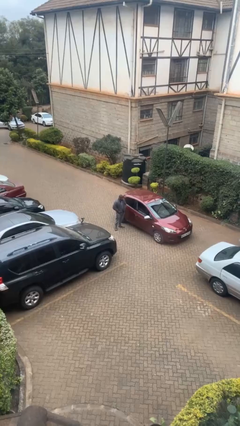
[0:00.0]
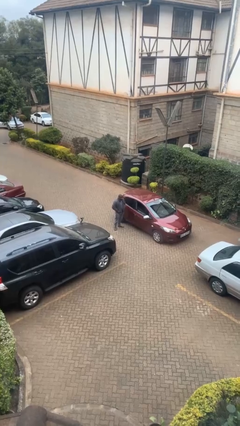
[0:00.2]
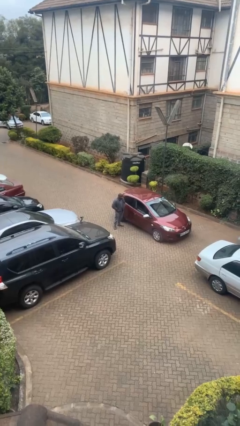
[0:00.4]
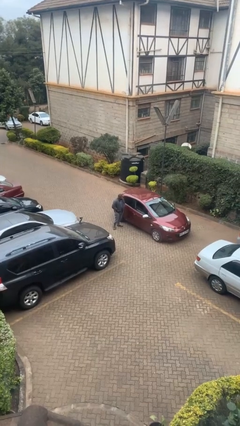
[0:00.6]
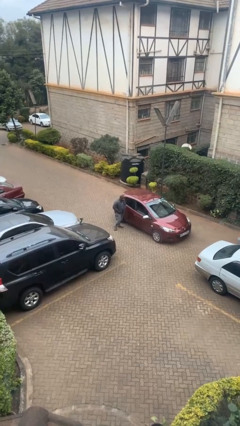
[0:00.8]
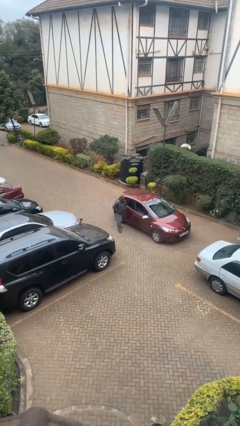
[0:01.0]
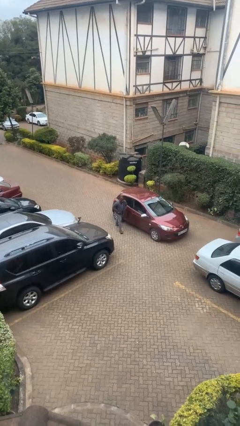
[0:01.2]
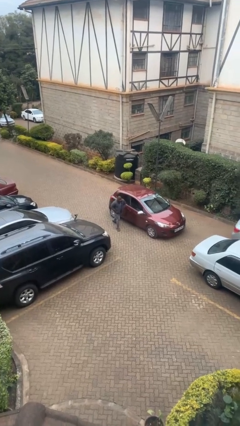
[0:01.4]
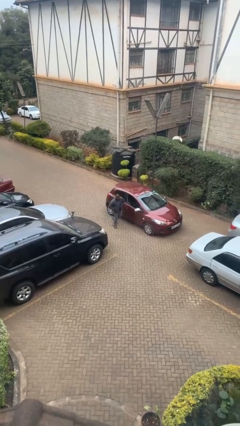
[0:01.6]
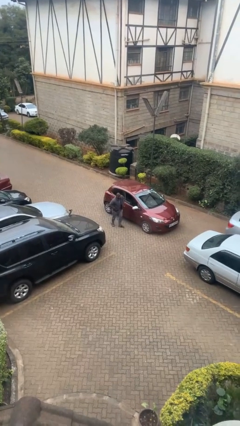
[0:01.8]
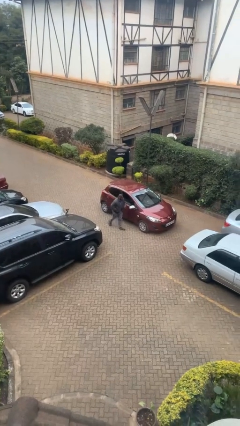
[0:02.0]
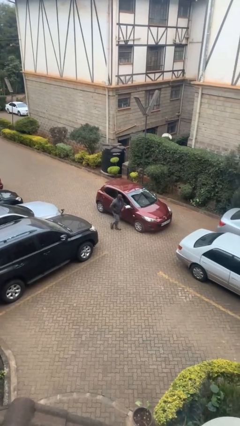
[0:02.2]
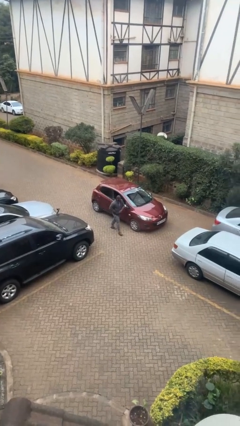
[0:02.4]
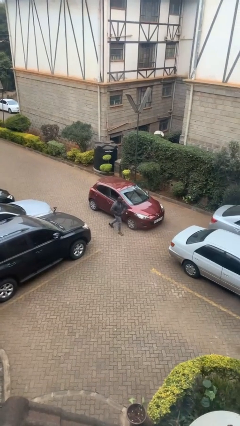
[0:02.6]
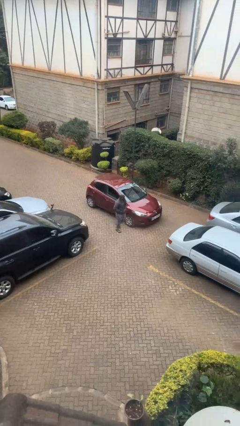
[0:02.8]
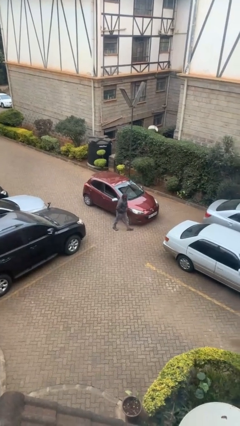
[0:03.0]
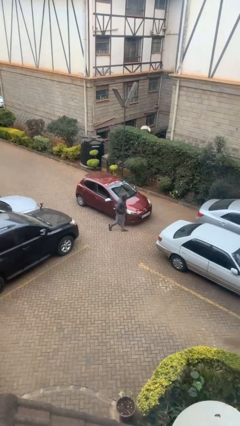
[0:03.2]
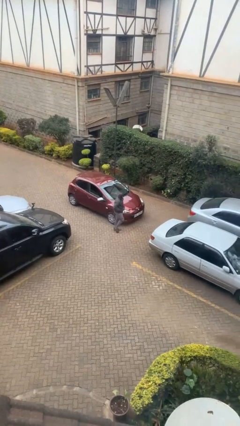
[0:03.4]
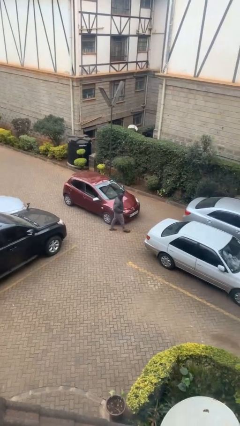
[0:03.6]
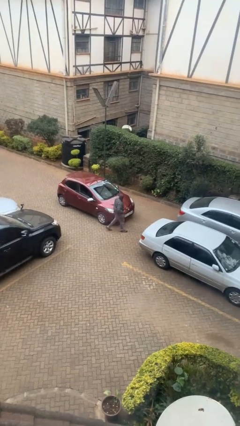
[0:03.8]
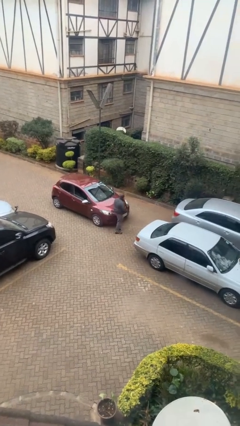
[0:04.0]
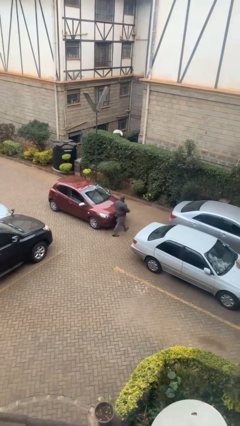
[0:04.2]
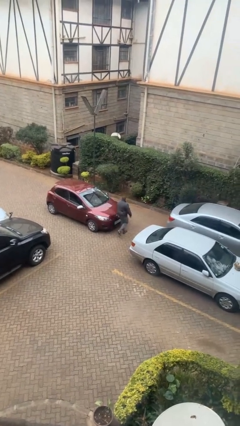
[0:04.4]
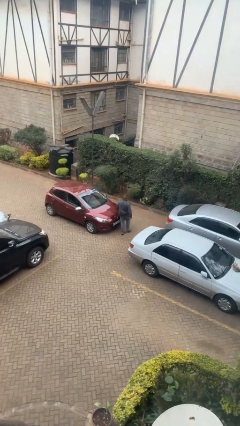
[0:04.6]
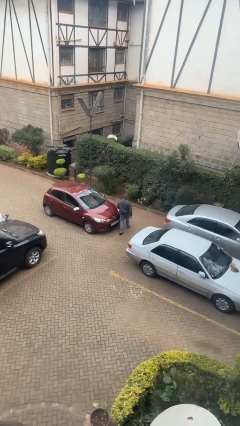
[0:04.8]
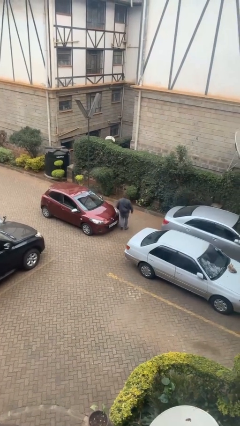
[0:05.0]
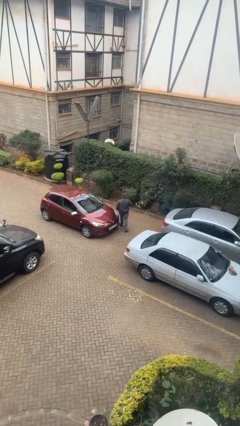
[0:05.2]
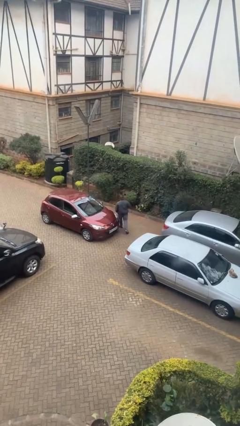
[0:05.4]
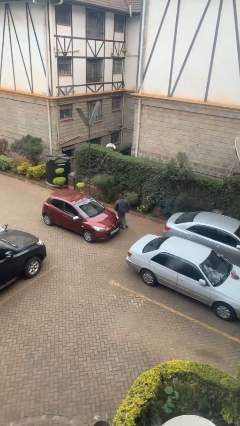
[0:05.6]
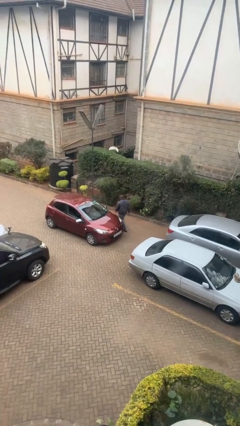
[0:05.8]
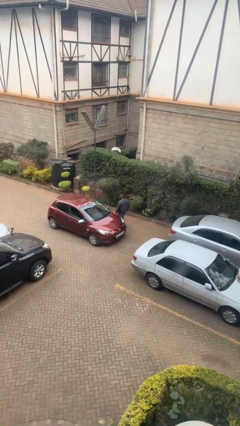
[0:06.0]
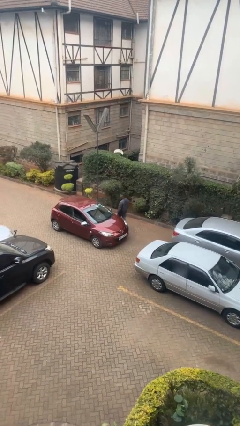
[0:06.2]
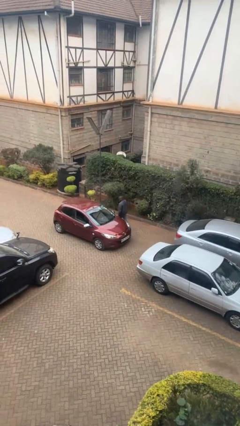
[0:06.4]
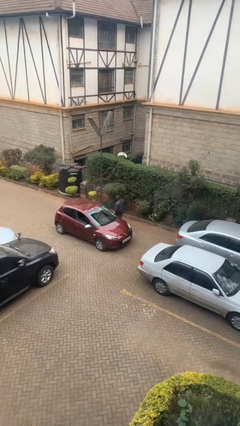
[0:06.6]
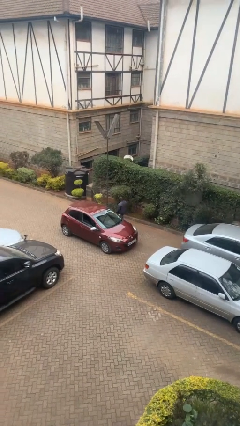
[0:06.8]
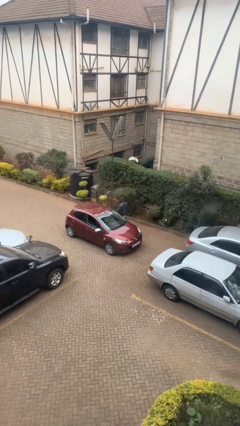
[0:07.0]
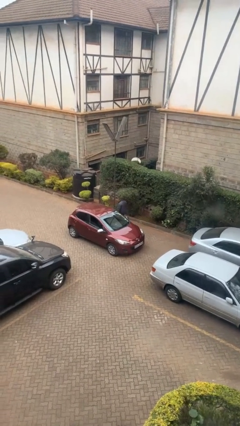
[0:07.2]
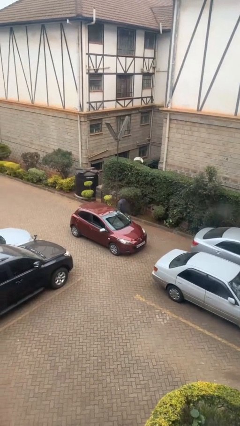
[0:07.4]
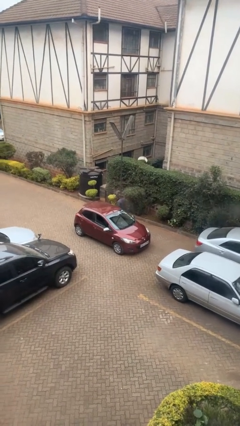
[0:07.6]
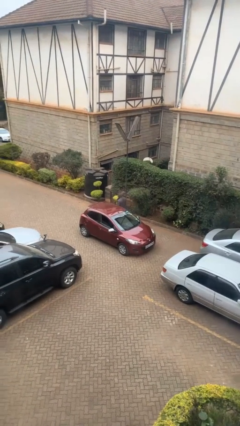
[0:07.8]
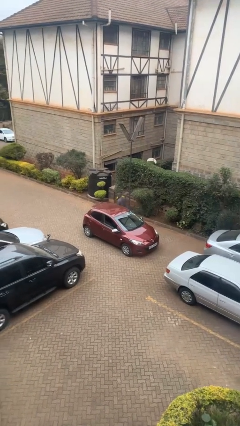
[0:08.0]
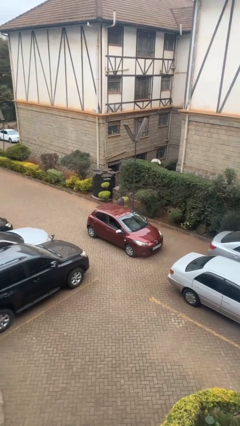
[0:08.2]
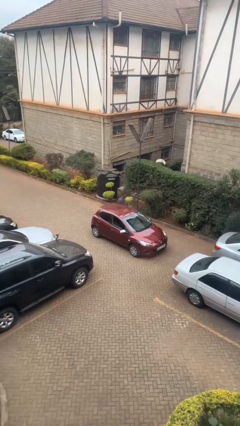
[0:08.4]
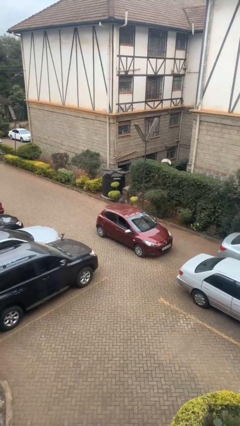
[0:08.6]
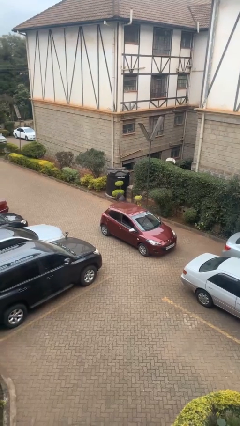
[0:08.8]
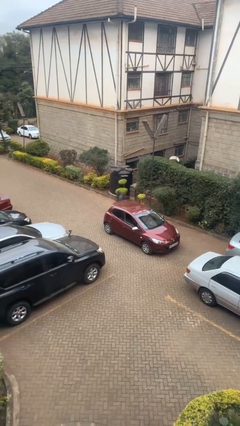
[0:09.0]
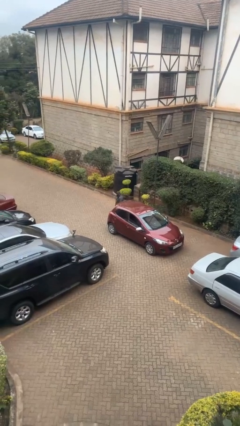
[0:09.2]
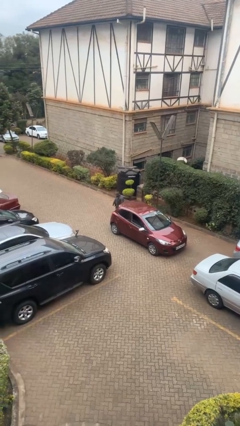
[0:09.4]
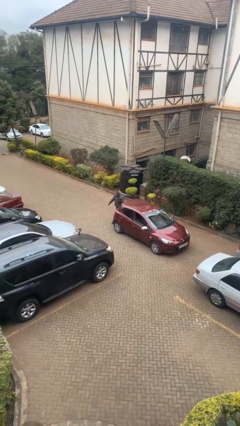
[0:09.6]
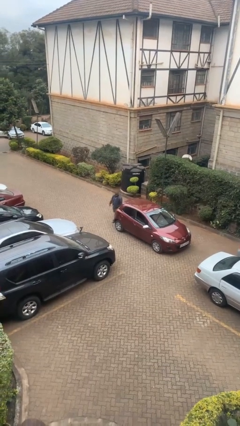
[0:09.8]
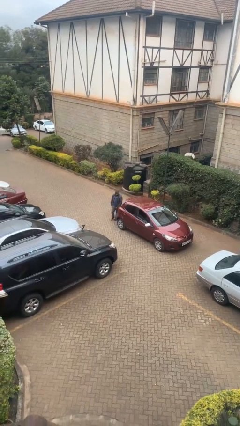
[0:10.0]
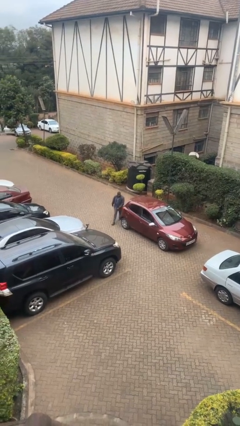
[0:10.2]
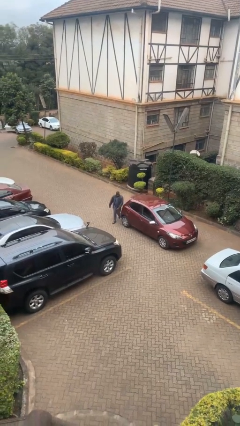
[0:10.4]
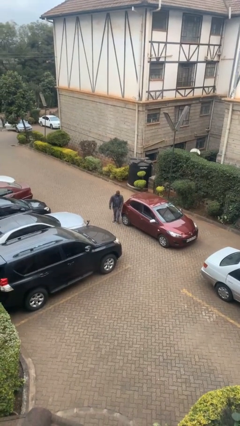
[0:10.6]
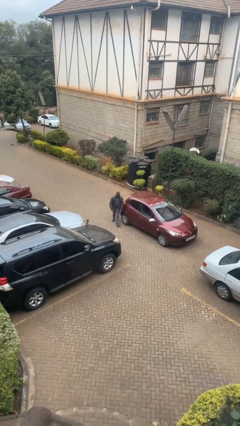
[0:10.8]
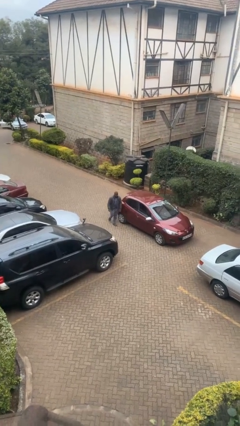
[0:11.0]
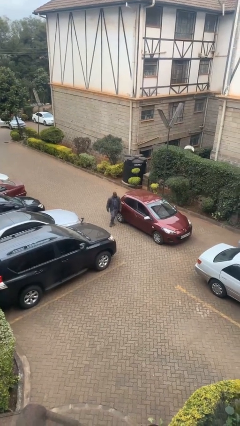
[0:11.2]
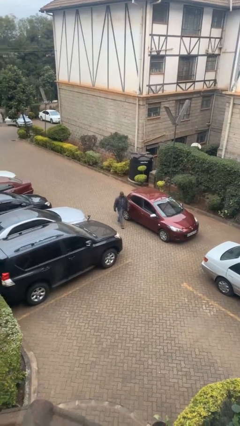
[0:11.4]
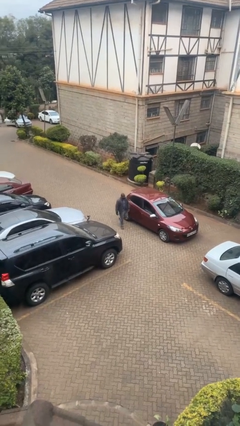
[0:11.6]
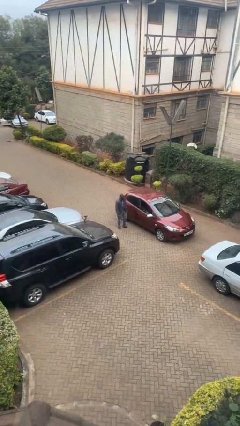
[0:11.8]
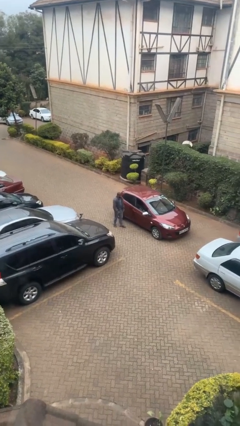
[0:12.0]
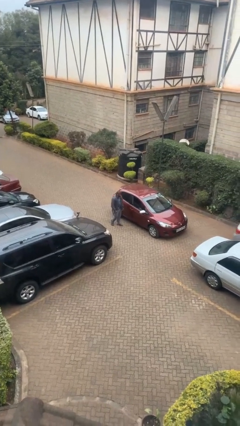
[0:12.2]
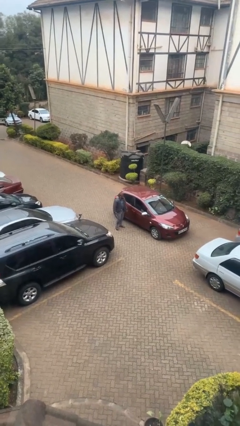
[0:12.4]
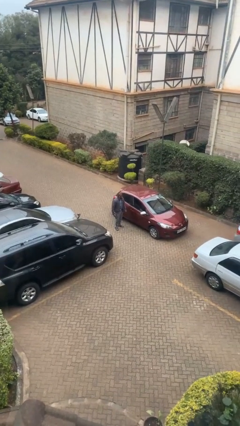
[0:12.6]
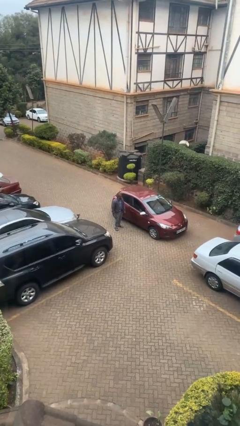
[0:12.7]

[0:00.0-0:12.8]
person walks around car

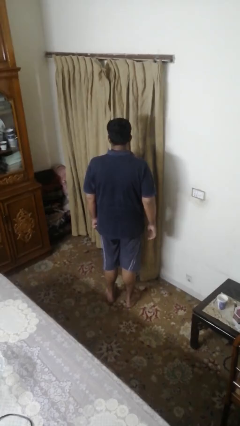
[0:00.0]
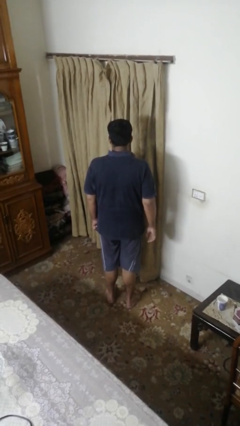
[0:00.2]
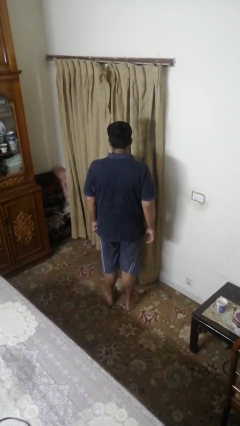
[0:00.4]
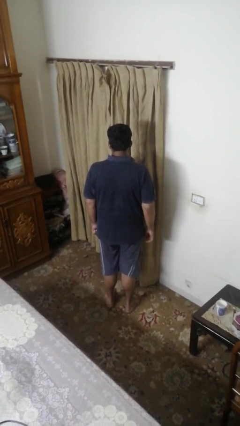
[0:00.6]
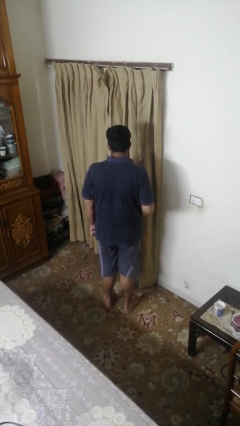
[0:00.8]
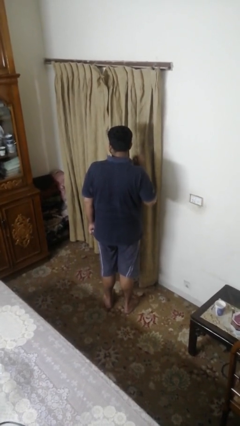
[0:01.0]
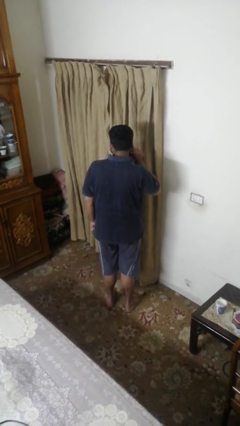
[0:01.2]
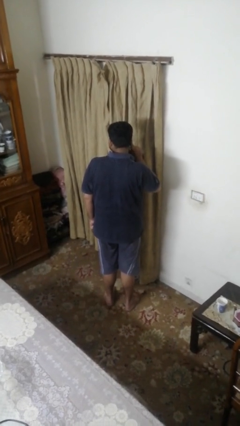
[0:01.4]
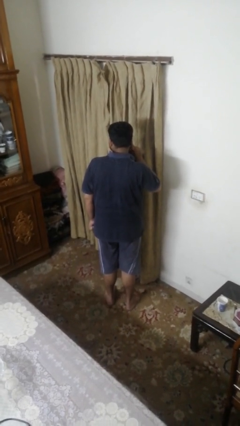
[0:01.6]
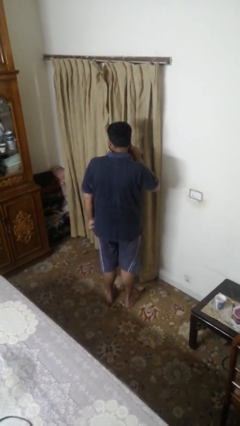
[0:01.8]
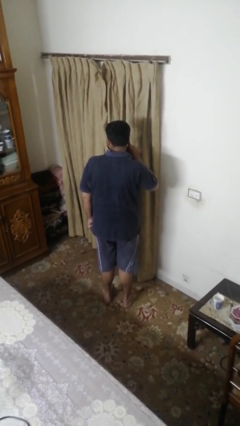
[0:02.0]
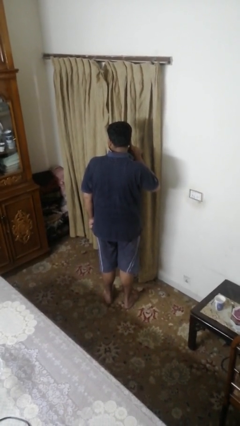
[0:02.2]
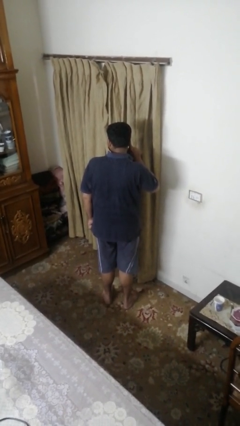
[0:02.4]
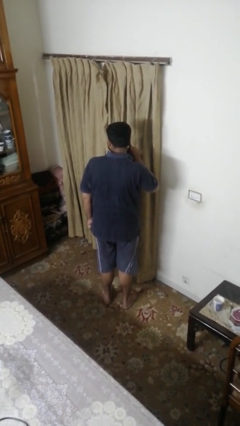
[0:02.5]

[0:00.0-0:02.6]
person gestures listen closely

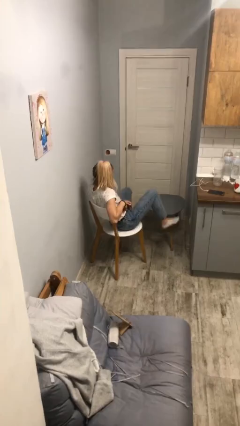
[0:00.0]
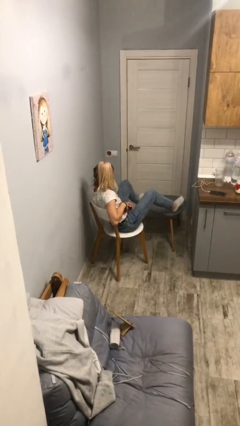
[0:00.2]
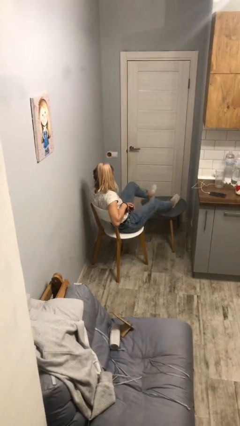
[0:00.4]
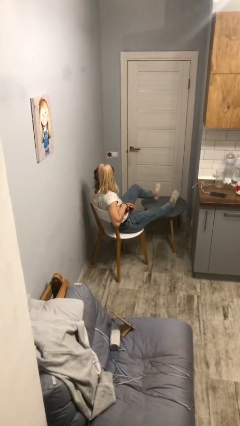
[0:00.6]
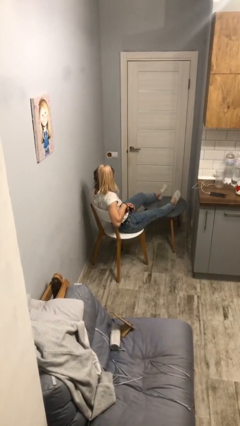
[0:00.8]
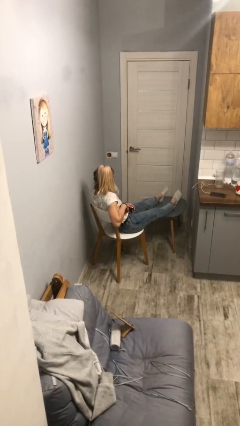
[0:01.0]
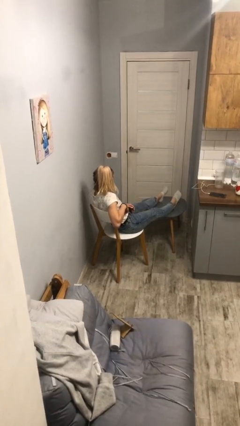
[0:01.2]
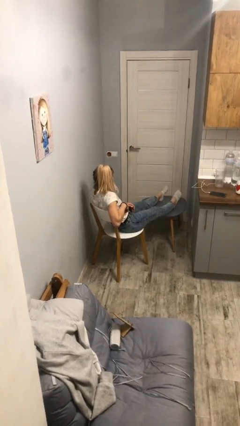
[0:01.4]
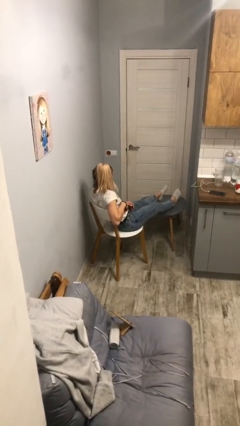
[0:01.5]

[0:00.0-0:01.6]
person puts feet up

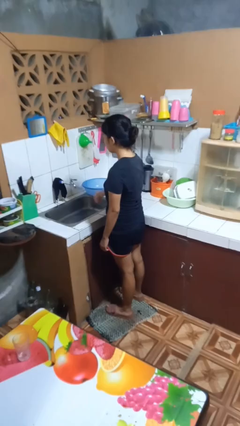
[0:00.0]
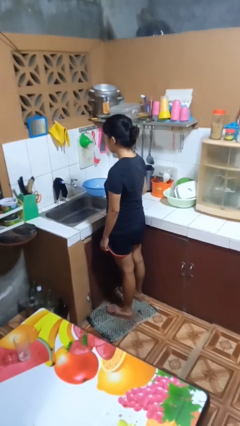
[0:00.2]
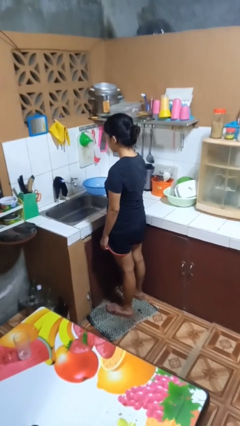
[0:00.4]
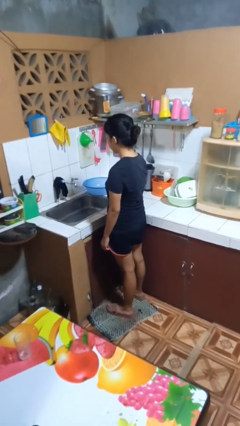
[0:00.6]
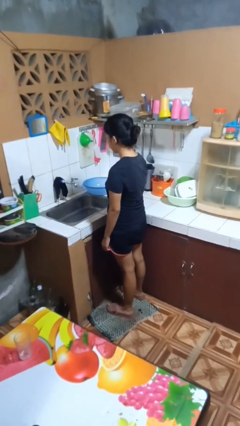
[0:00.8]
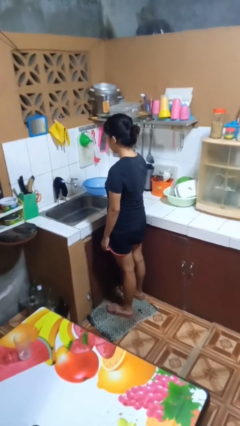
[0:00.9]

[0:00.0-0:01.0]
person turns off faucet

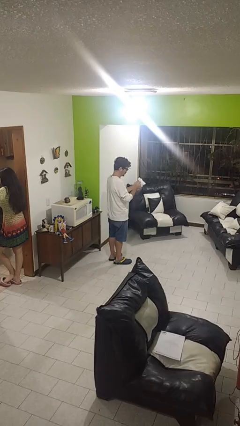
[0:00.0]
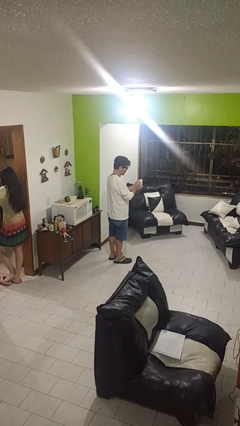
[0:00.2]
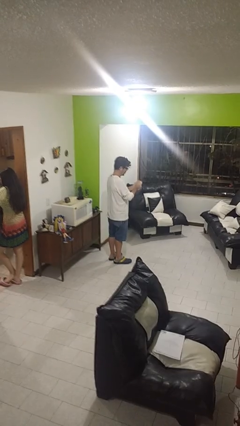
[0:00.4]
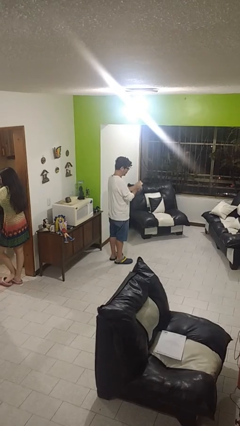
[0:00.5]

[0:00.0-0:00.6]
person crumples paper
